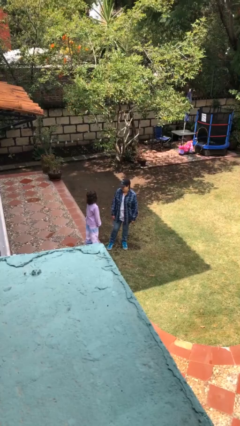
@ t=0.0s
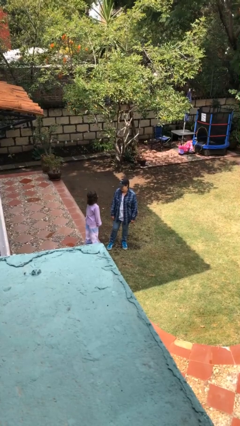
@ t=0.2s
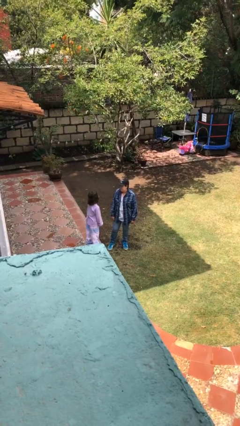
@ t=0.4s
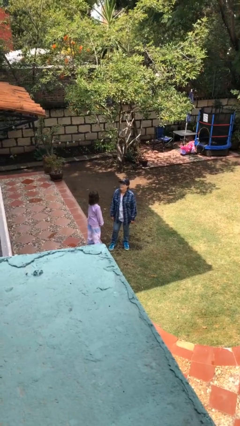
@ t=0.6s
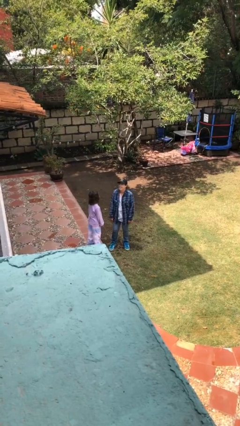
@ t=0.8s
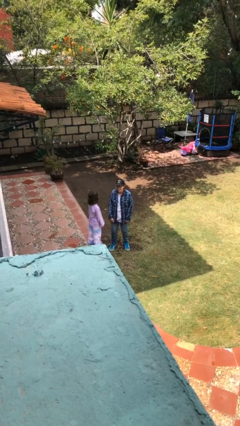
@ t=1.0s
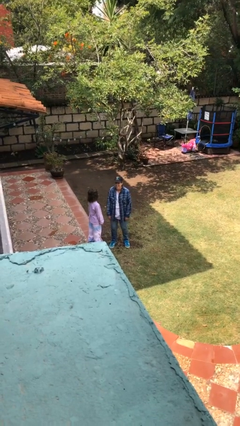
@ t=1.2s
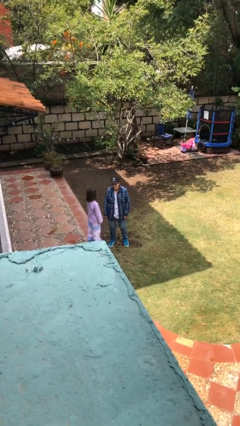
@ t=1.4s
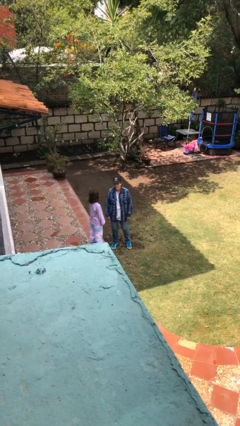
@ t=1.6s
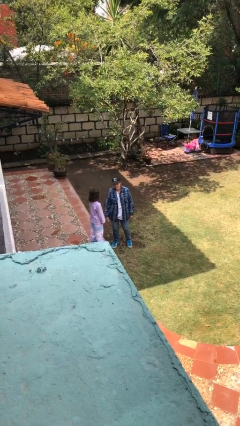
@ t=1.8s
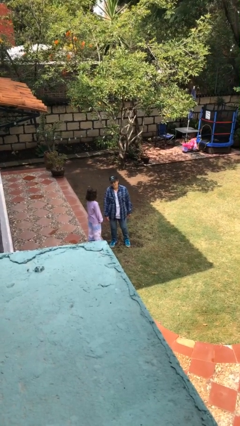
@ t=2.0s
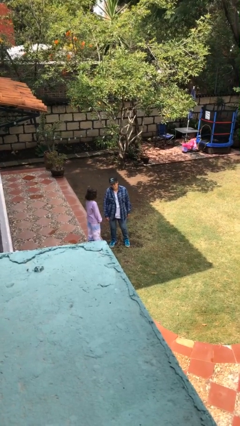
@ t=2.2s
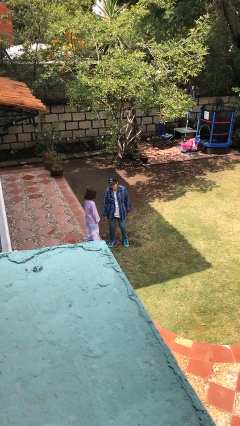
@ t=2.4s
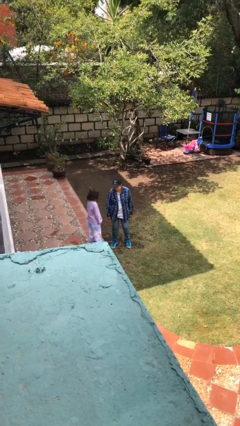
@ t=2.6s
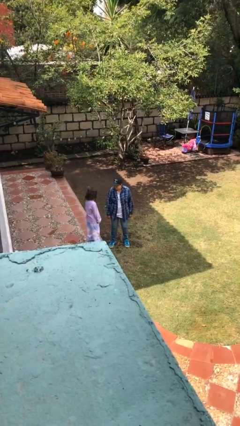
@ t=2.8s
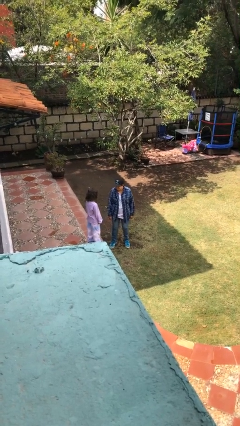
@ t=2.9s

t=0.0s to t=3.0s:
person laughs with person

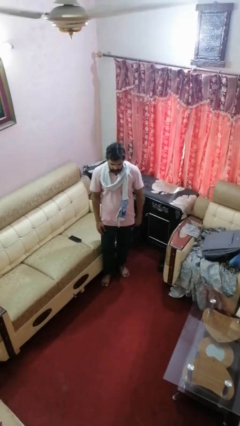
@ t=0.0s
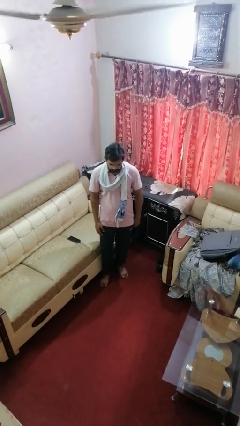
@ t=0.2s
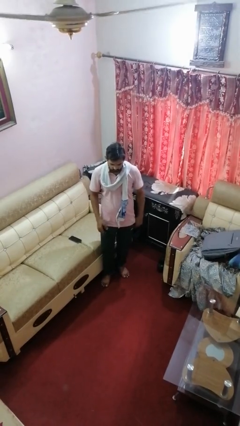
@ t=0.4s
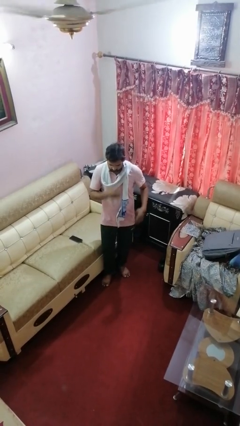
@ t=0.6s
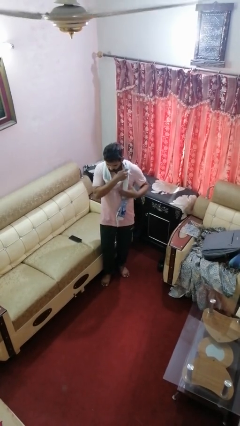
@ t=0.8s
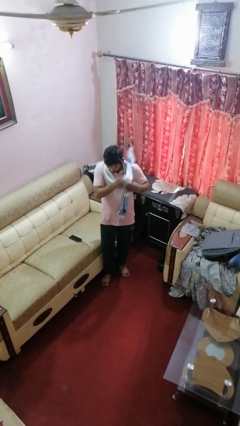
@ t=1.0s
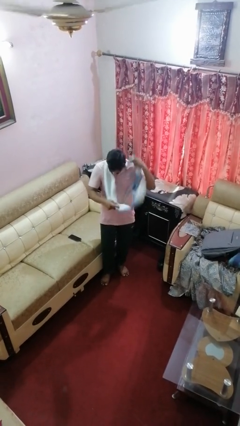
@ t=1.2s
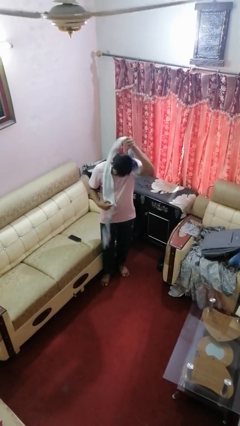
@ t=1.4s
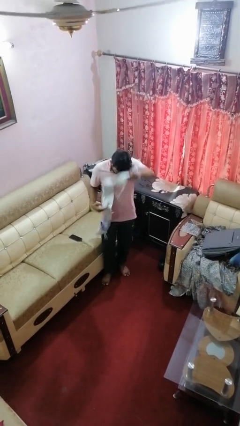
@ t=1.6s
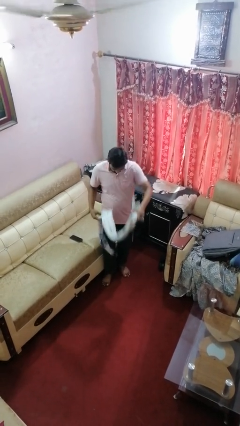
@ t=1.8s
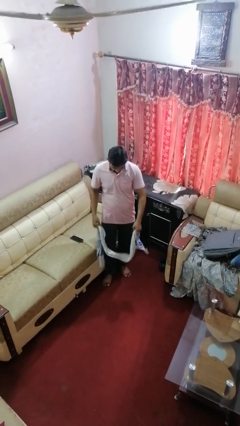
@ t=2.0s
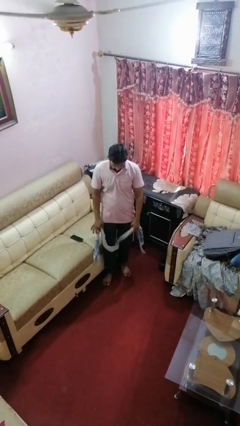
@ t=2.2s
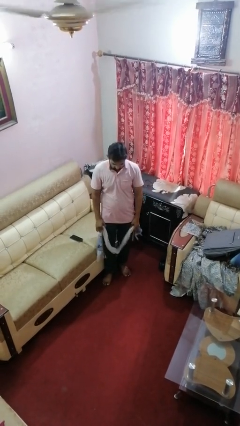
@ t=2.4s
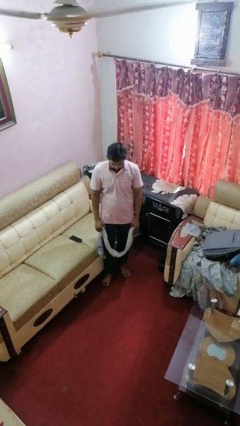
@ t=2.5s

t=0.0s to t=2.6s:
person takes off scarf

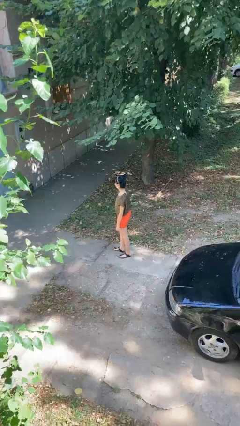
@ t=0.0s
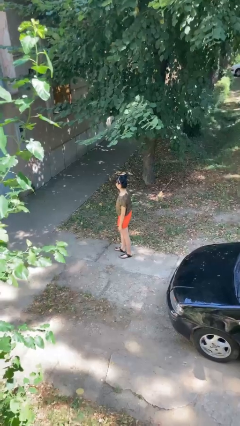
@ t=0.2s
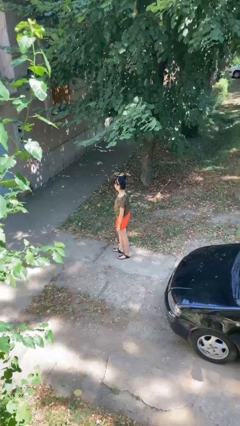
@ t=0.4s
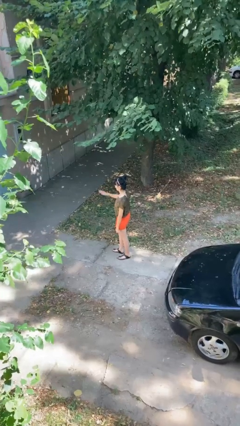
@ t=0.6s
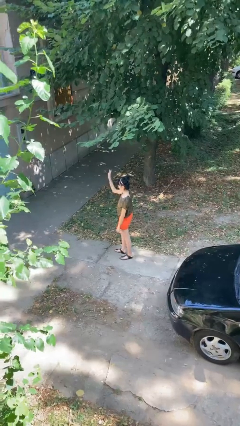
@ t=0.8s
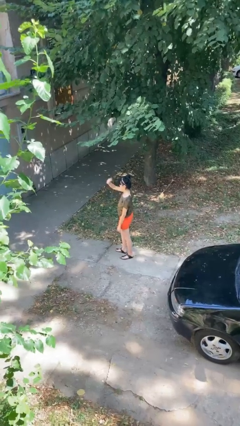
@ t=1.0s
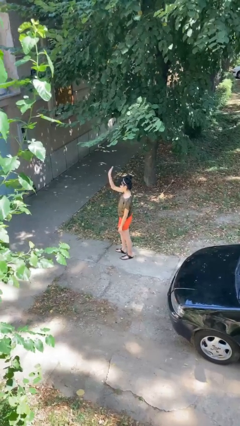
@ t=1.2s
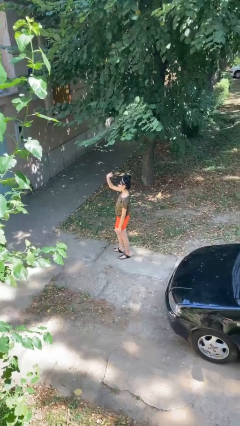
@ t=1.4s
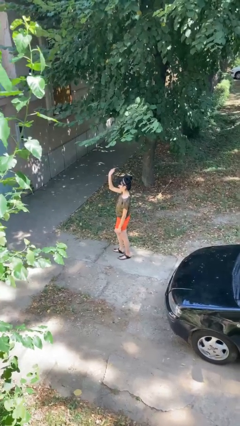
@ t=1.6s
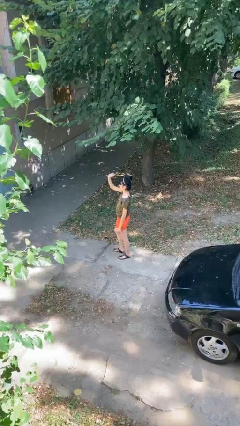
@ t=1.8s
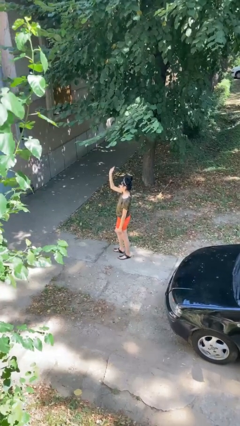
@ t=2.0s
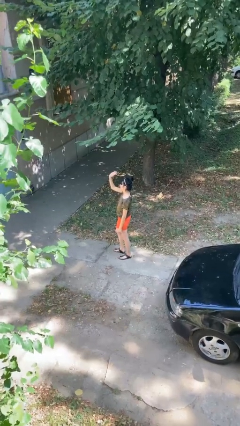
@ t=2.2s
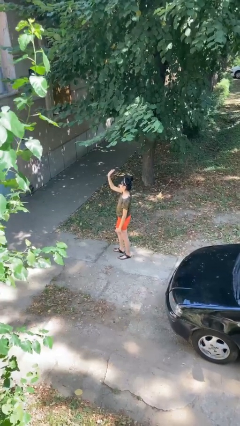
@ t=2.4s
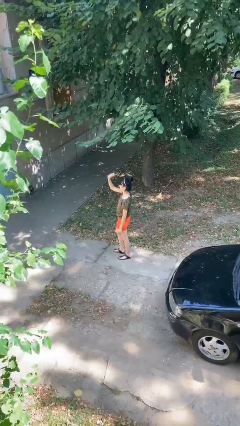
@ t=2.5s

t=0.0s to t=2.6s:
person waves at person

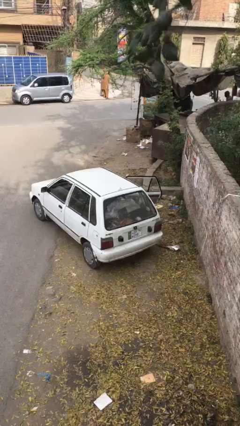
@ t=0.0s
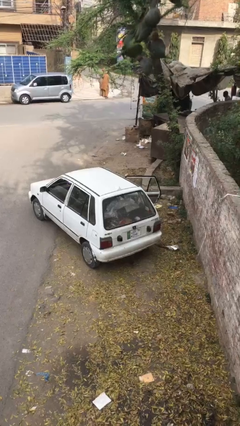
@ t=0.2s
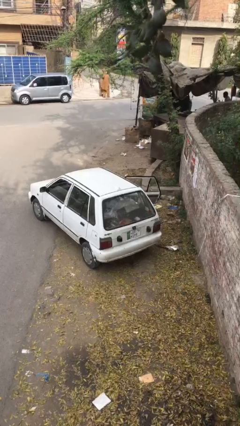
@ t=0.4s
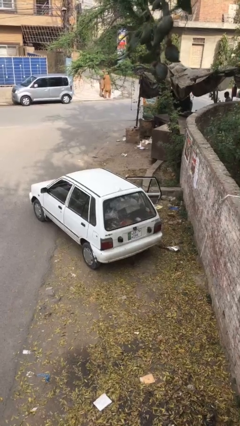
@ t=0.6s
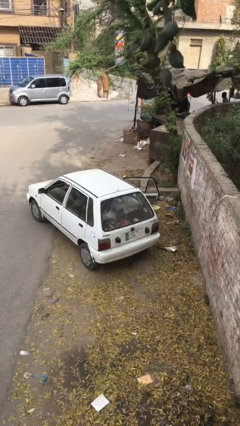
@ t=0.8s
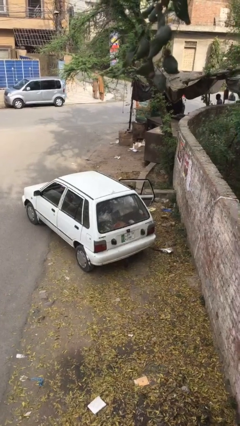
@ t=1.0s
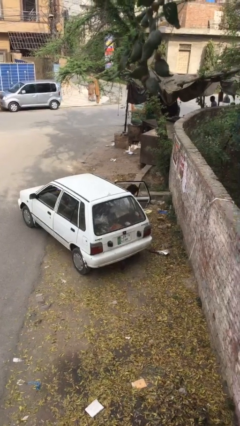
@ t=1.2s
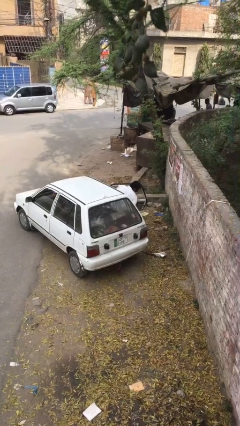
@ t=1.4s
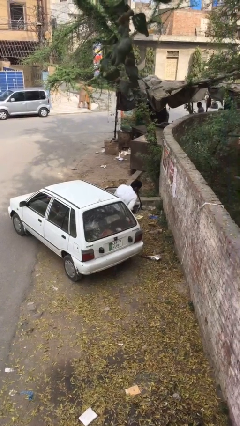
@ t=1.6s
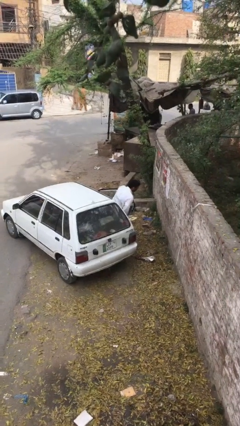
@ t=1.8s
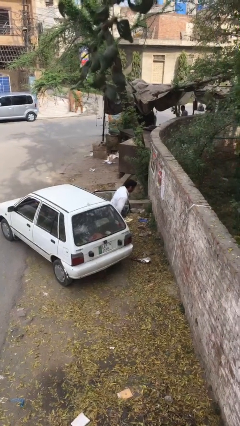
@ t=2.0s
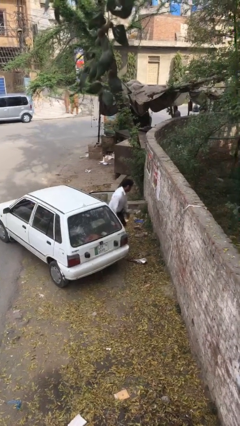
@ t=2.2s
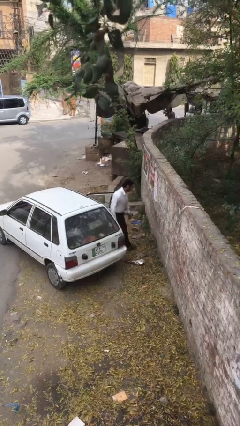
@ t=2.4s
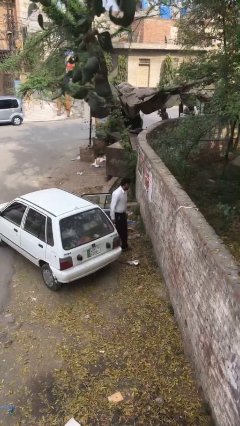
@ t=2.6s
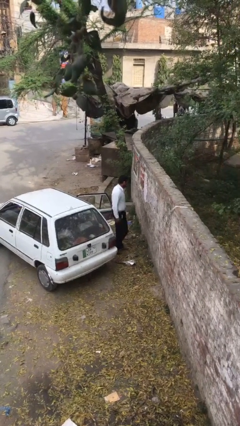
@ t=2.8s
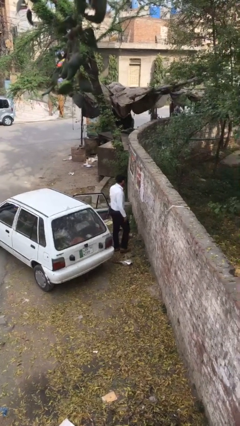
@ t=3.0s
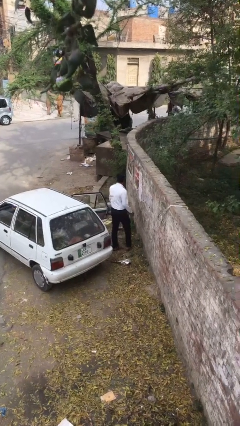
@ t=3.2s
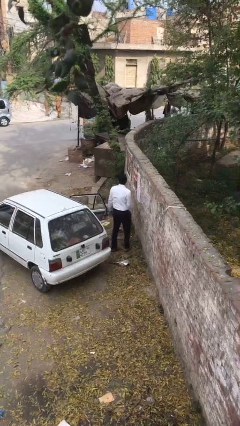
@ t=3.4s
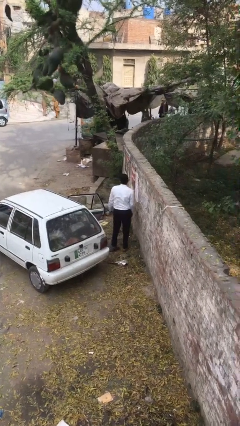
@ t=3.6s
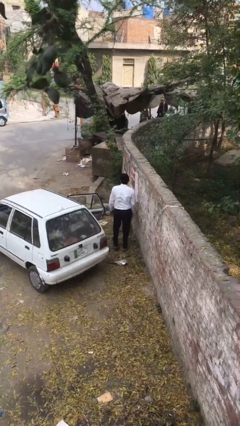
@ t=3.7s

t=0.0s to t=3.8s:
person exits car

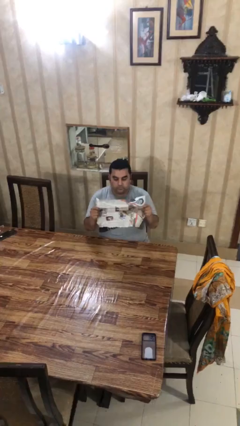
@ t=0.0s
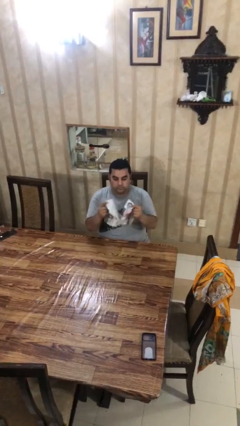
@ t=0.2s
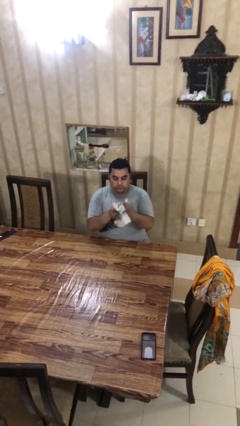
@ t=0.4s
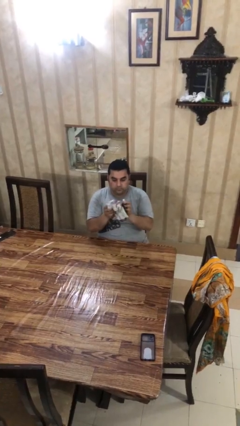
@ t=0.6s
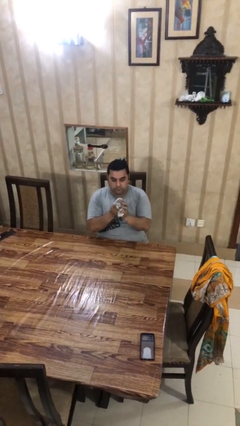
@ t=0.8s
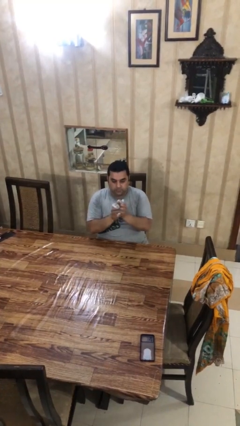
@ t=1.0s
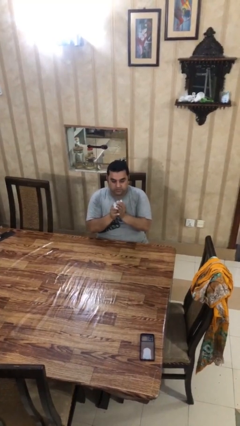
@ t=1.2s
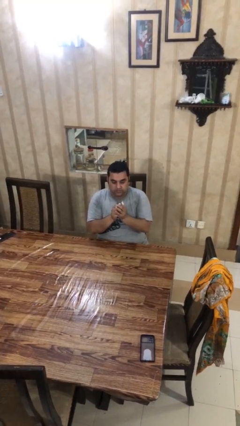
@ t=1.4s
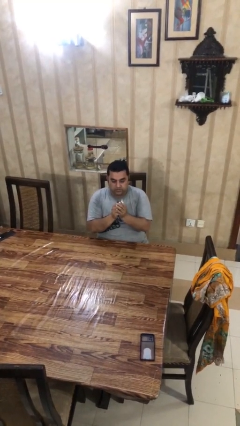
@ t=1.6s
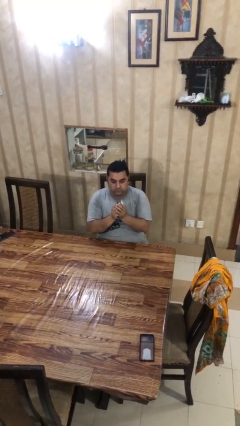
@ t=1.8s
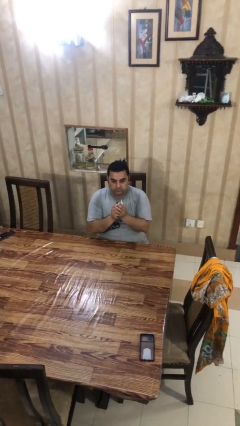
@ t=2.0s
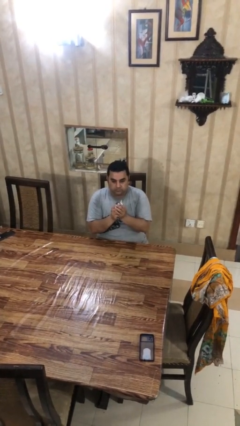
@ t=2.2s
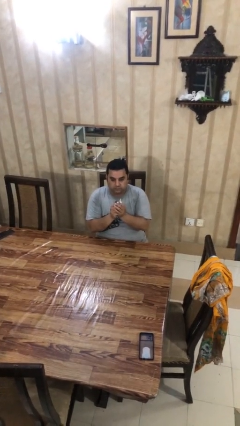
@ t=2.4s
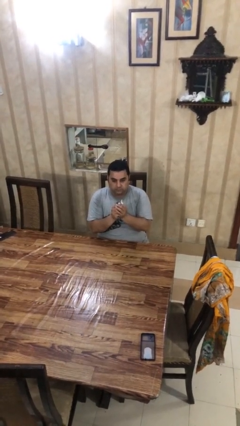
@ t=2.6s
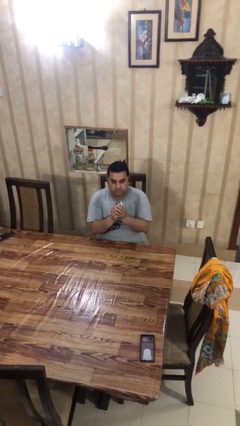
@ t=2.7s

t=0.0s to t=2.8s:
person crumples paper

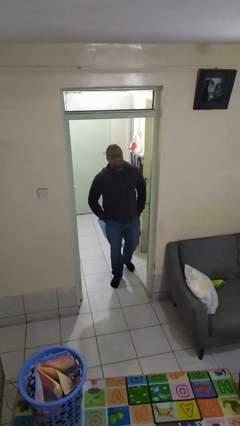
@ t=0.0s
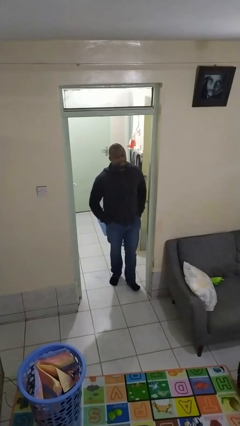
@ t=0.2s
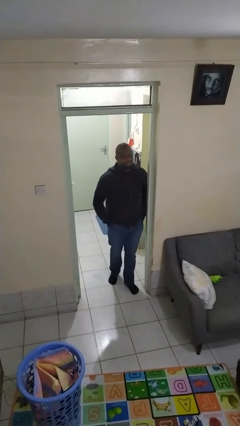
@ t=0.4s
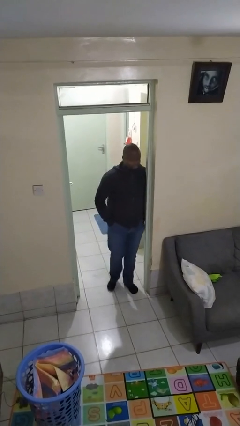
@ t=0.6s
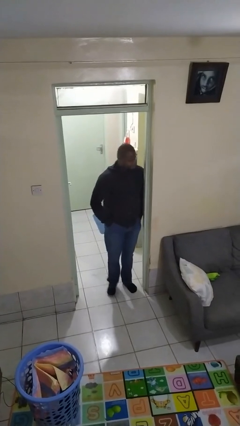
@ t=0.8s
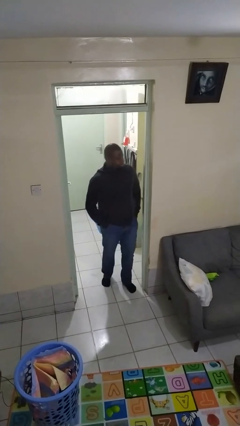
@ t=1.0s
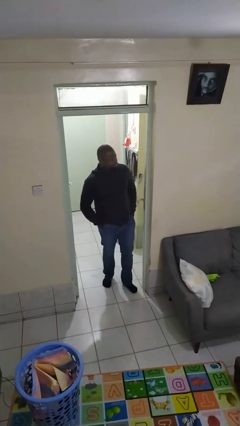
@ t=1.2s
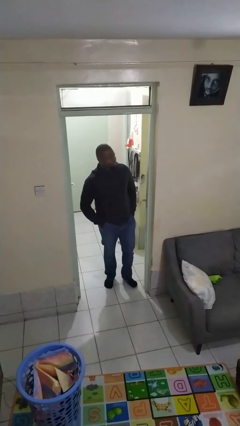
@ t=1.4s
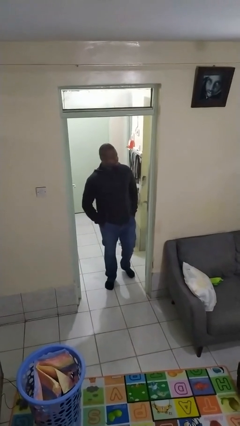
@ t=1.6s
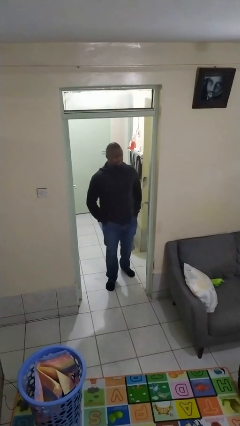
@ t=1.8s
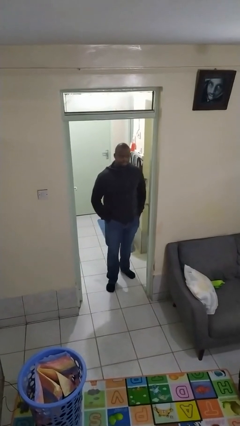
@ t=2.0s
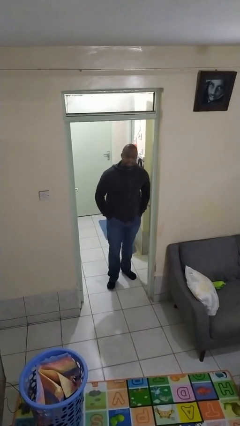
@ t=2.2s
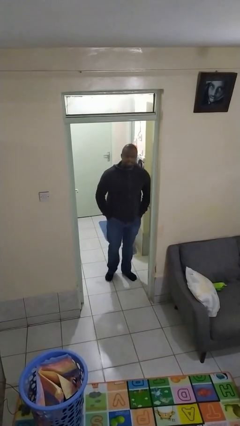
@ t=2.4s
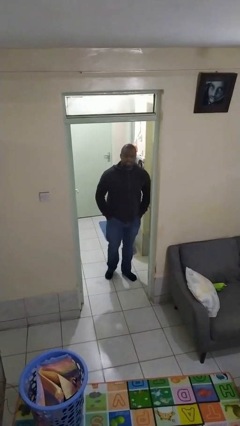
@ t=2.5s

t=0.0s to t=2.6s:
person bumps into wall
